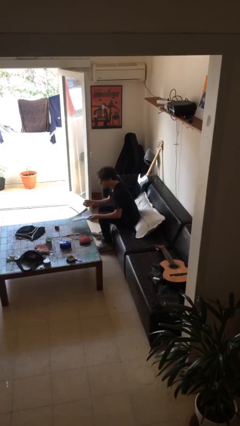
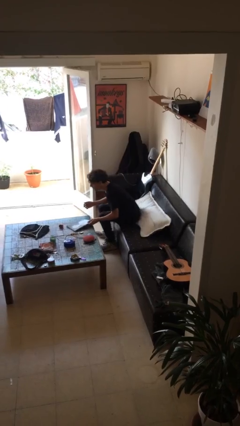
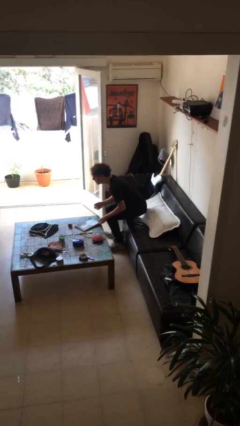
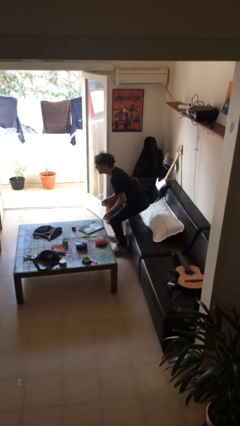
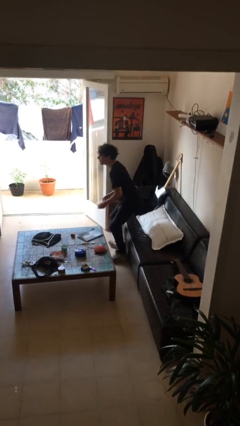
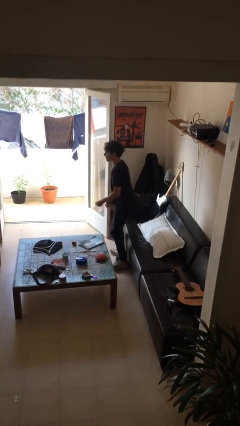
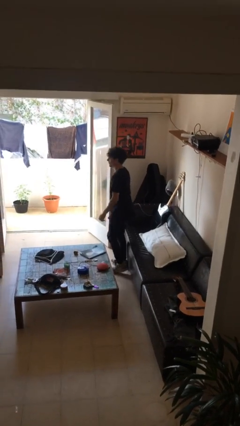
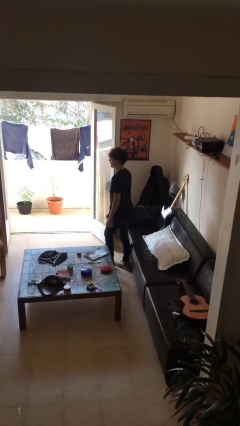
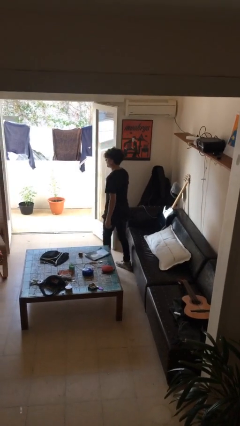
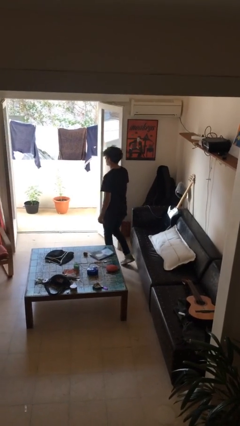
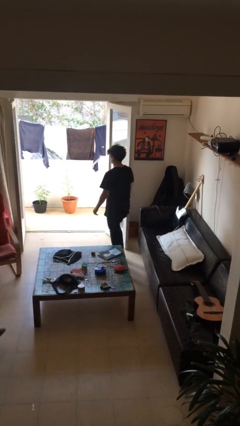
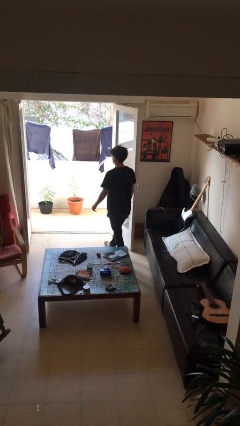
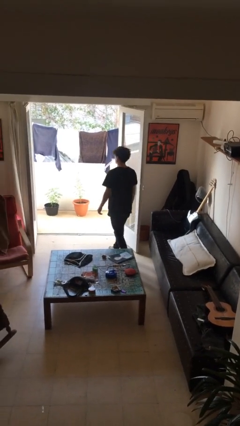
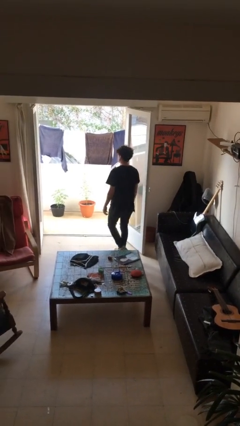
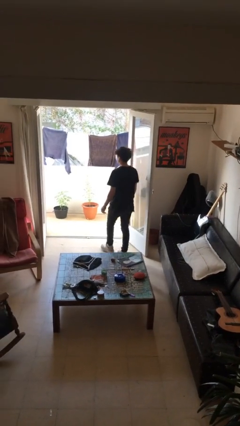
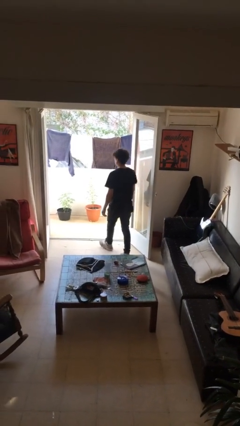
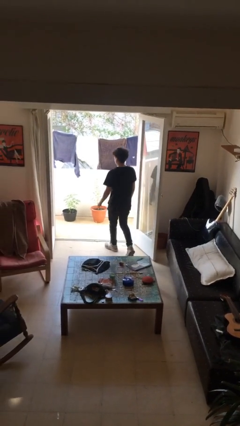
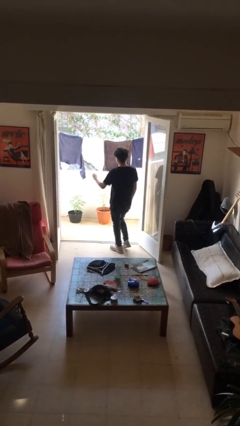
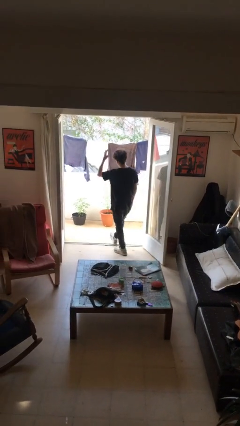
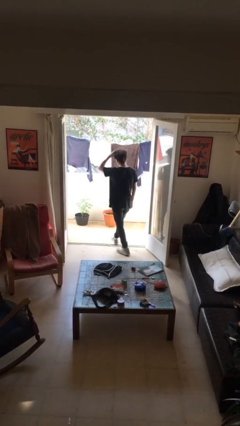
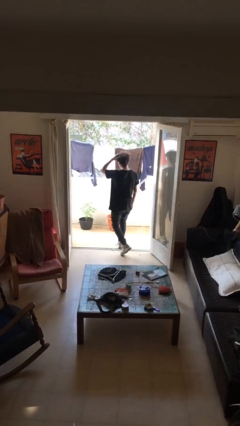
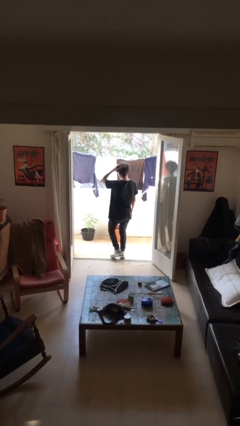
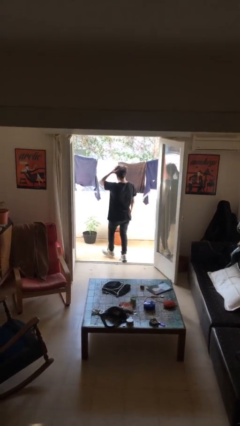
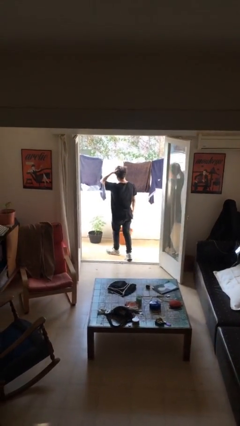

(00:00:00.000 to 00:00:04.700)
person stands up

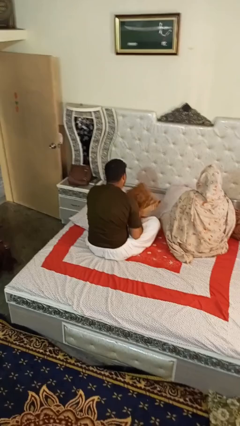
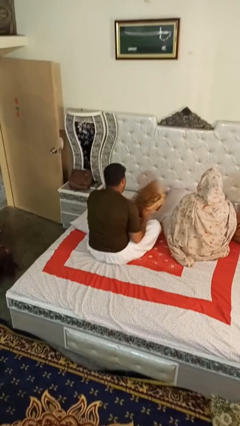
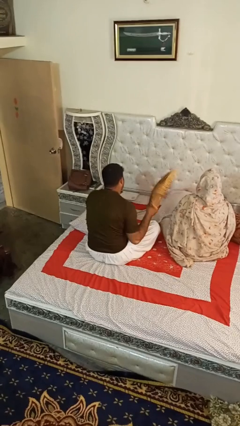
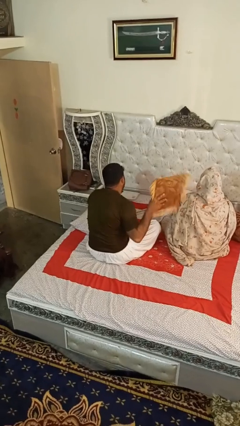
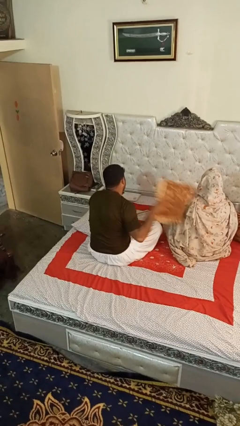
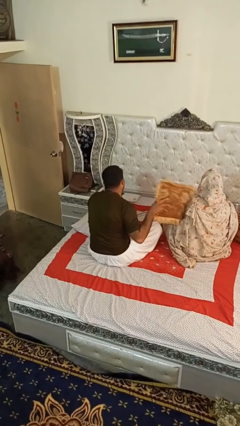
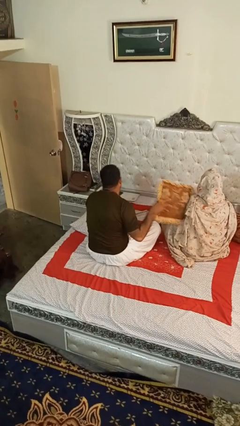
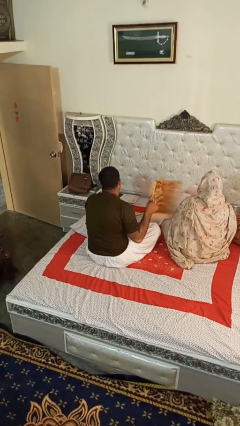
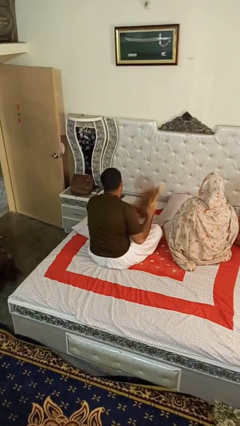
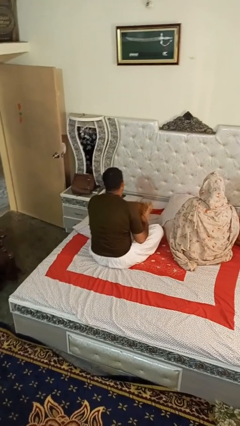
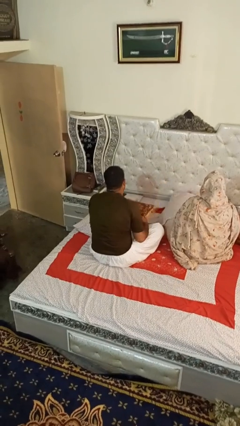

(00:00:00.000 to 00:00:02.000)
person hits person with pillow

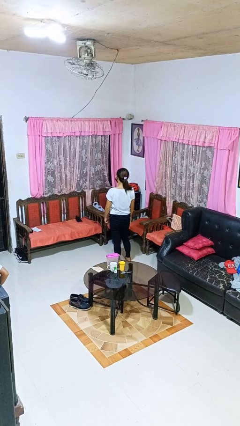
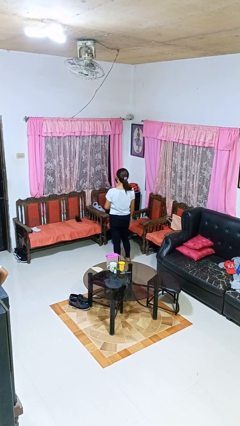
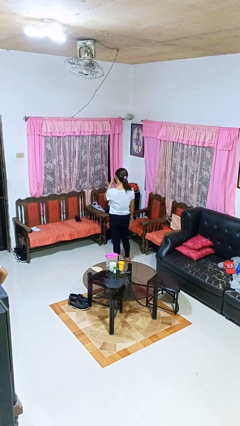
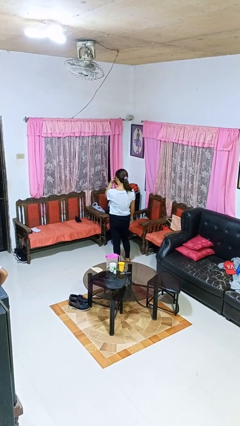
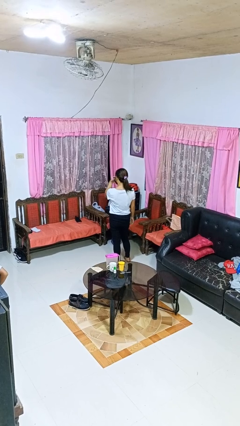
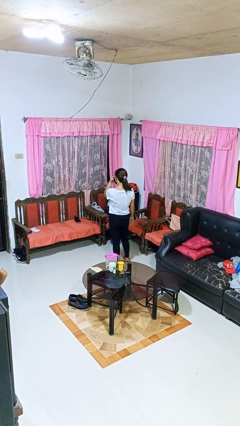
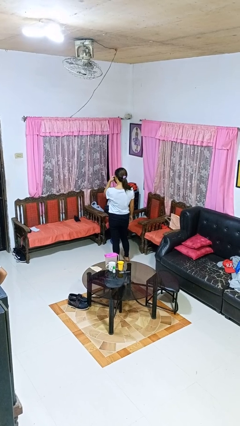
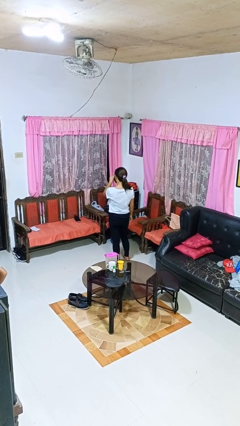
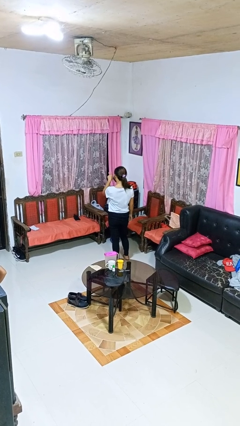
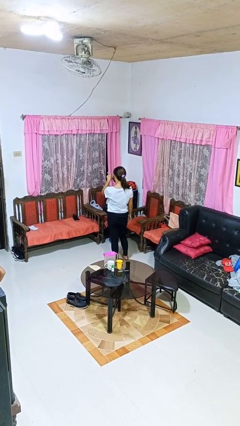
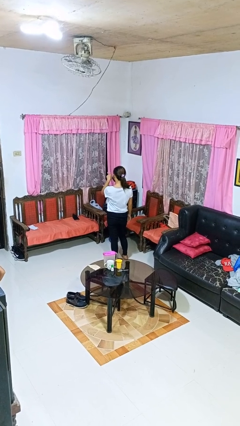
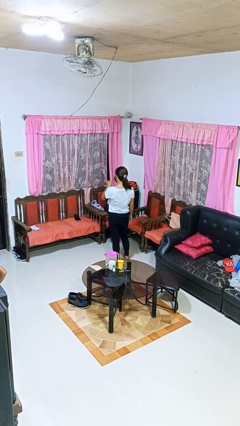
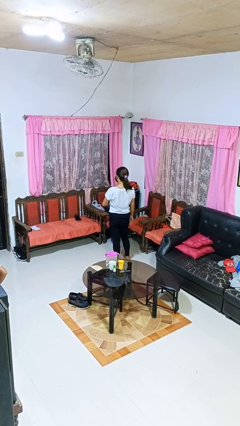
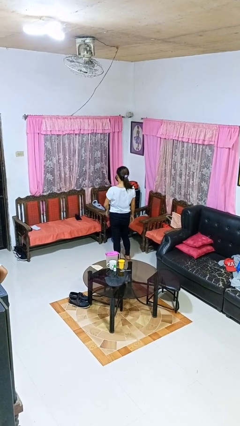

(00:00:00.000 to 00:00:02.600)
person gestures watch closely

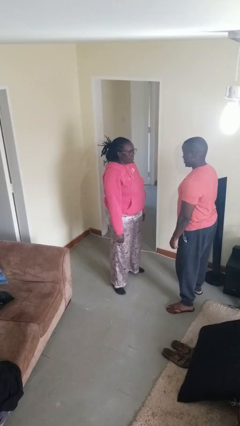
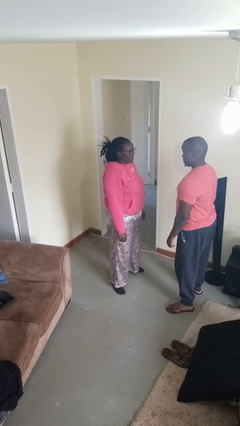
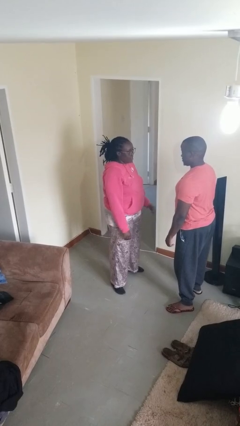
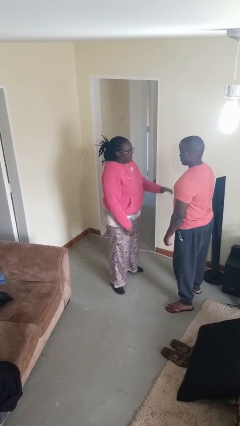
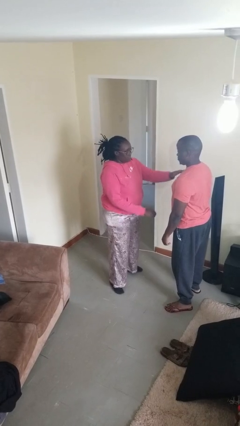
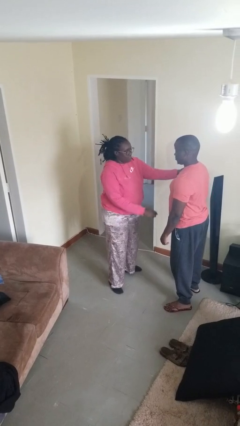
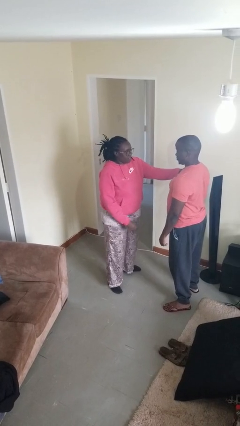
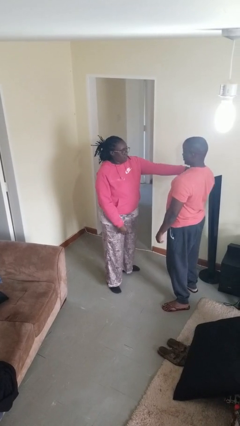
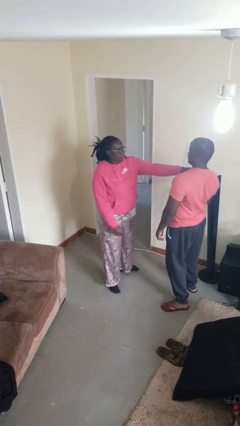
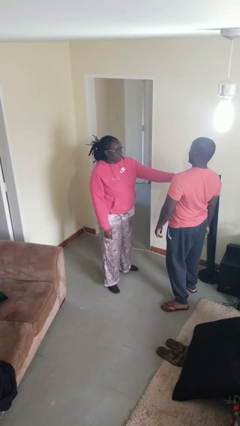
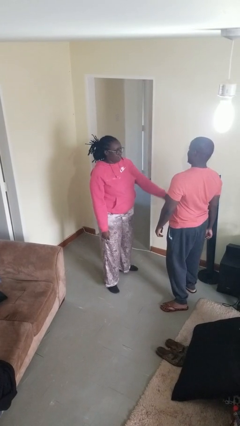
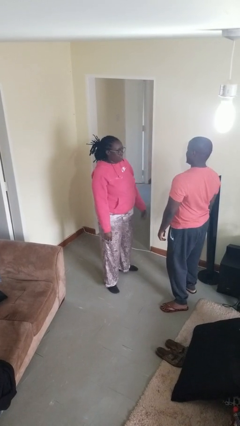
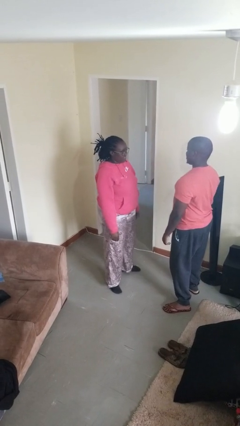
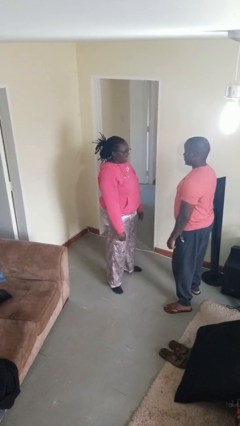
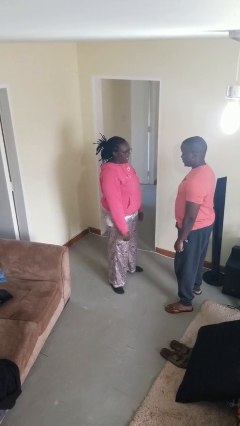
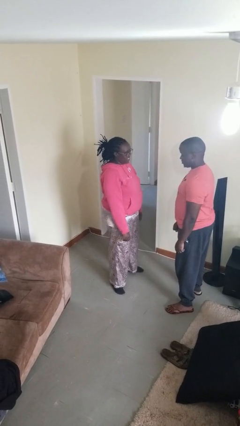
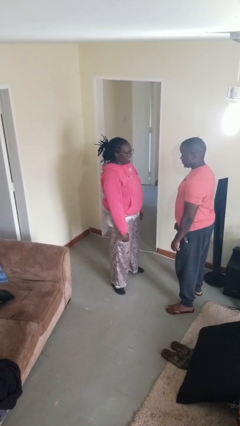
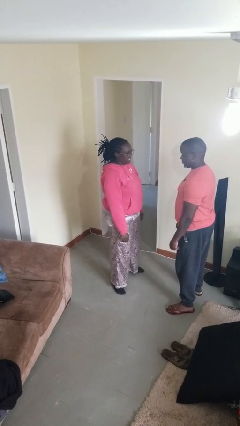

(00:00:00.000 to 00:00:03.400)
person shoves person

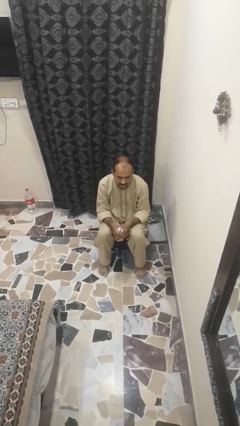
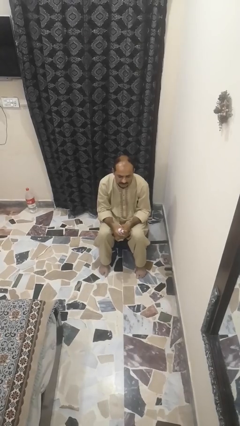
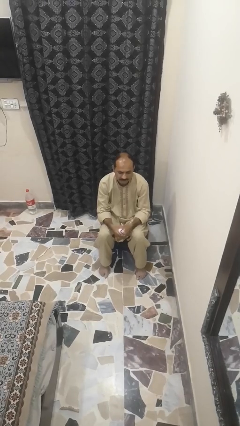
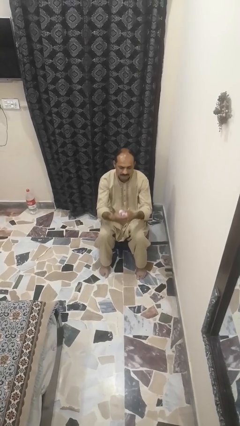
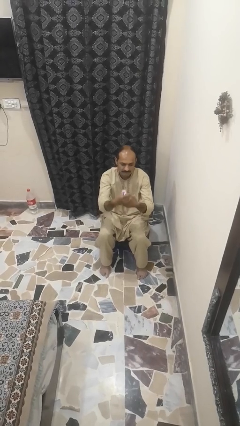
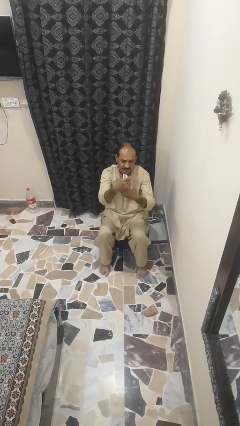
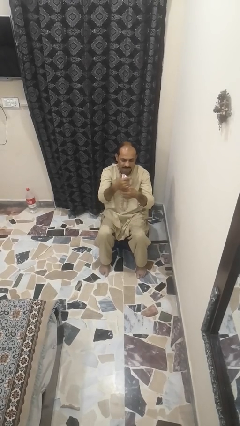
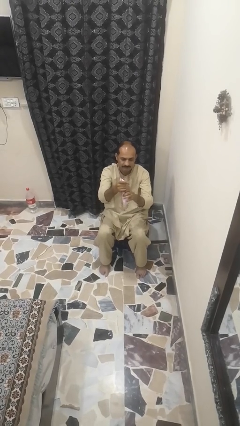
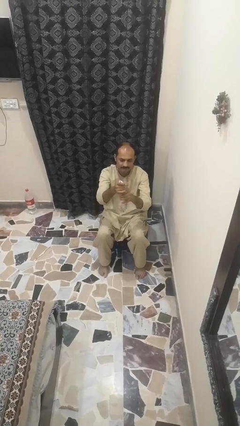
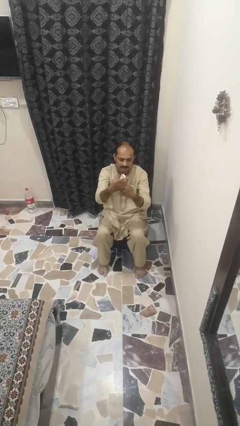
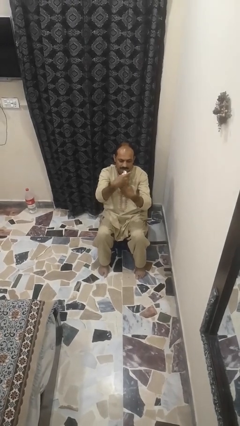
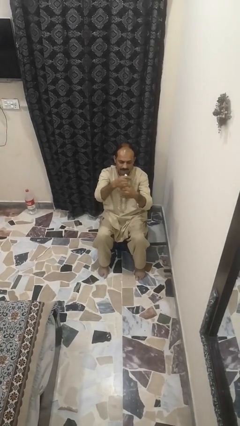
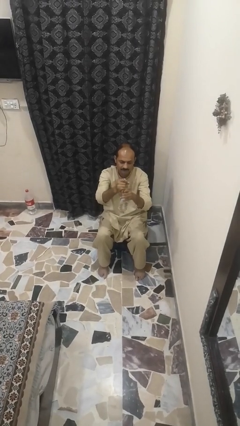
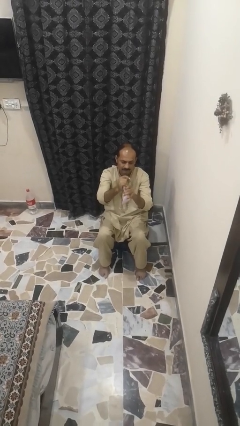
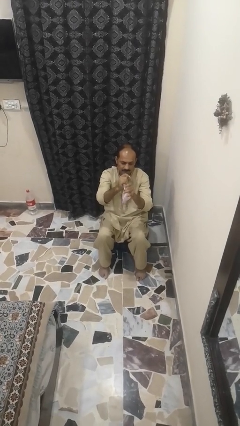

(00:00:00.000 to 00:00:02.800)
person squeezes object

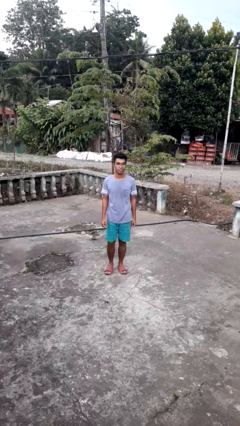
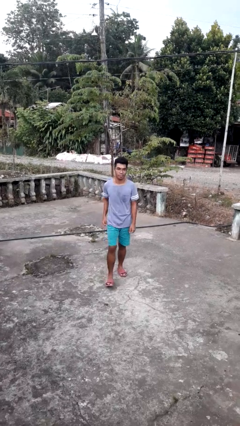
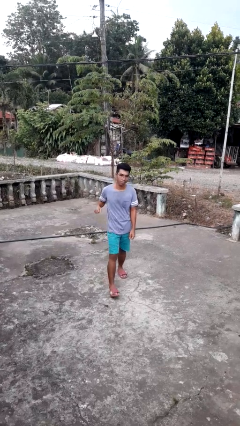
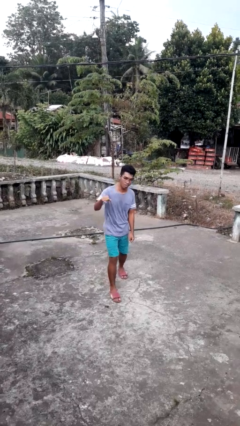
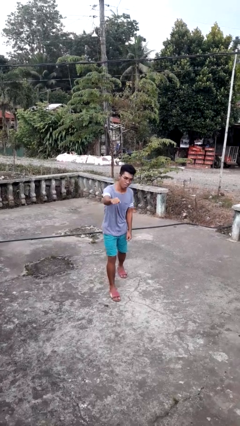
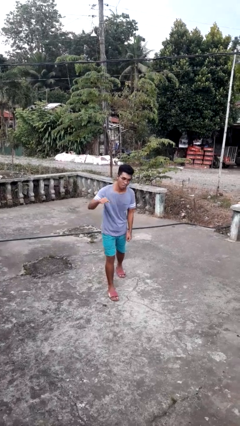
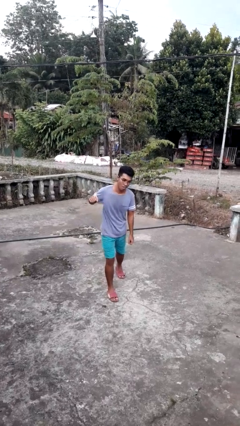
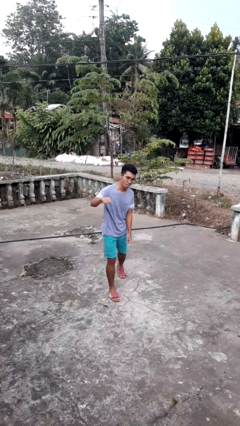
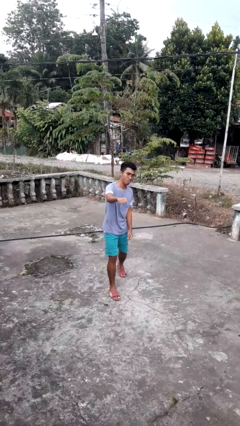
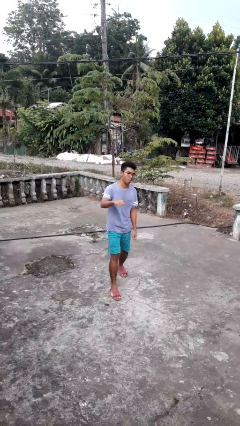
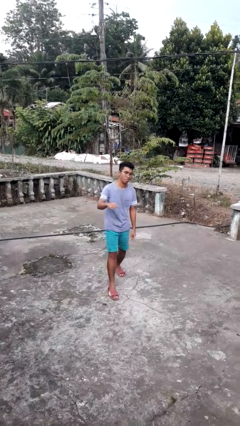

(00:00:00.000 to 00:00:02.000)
person punches
